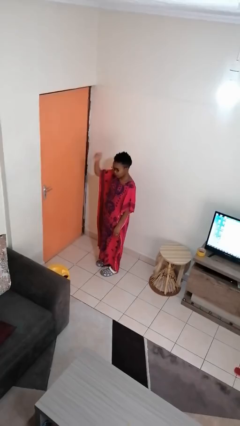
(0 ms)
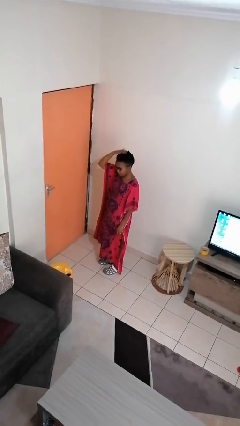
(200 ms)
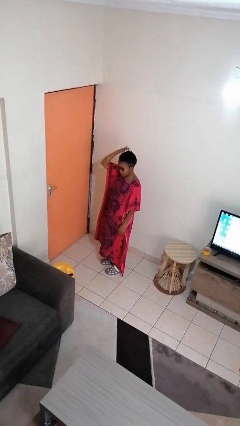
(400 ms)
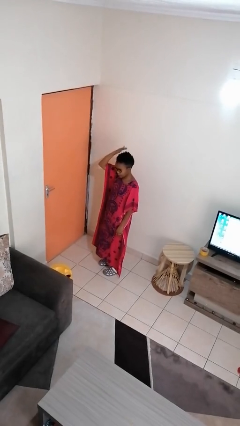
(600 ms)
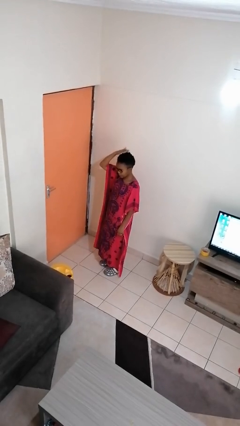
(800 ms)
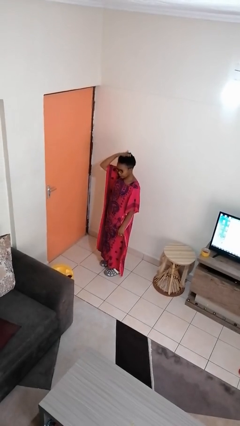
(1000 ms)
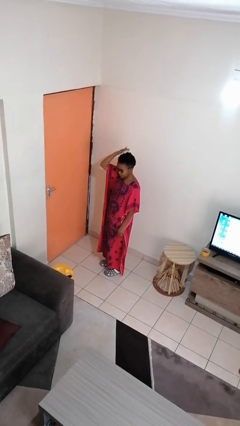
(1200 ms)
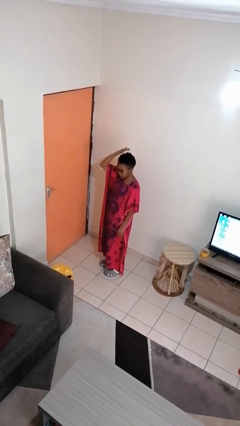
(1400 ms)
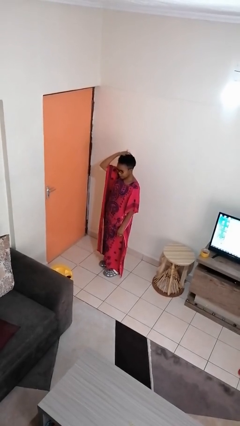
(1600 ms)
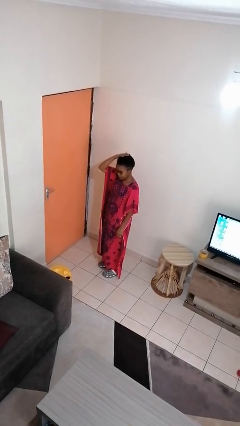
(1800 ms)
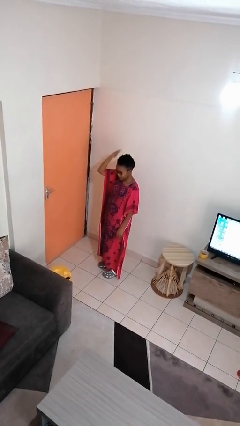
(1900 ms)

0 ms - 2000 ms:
person pats head

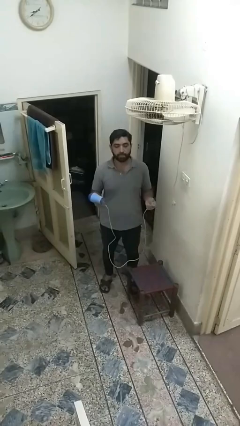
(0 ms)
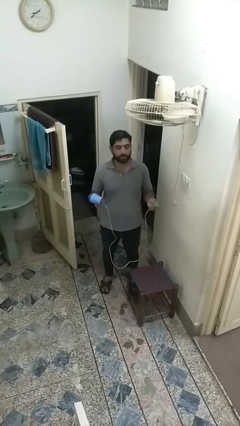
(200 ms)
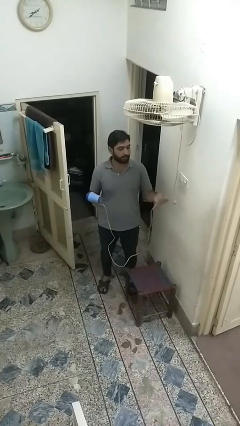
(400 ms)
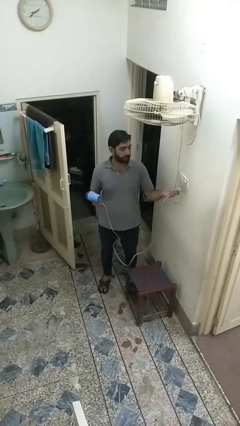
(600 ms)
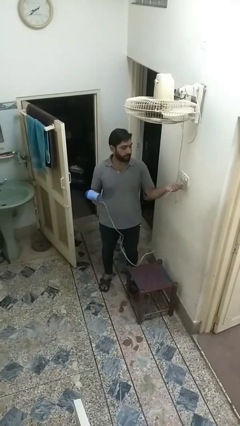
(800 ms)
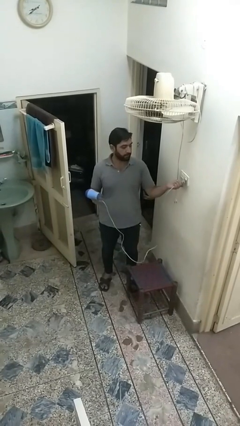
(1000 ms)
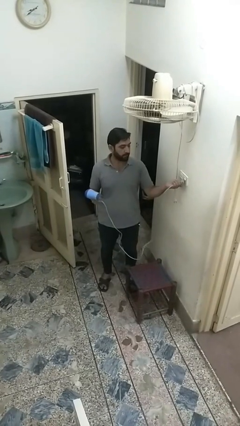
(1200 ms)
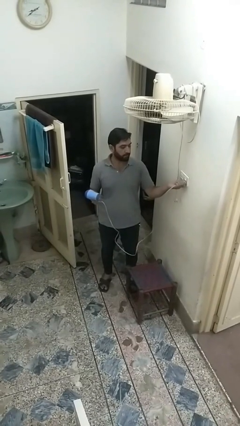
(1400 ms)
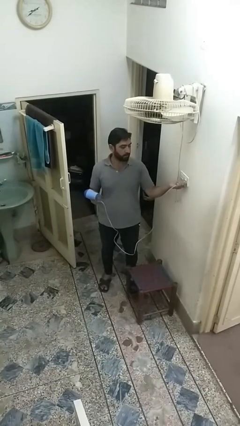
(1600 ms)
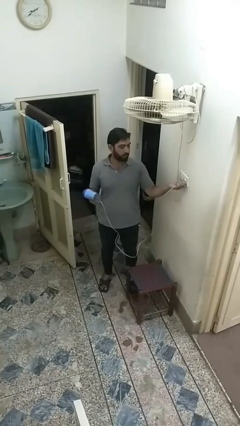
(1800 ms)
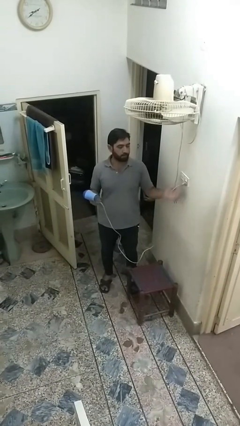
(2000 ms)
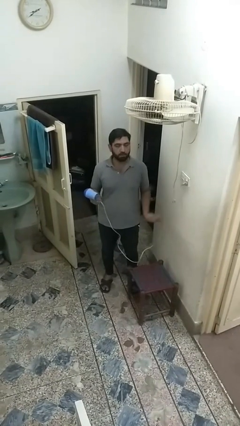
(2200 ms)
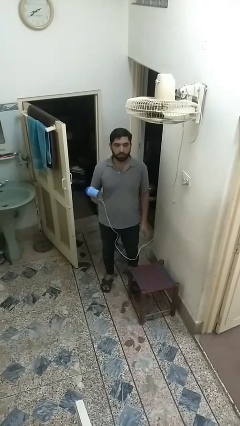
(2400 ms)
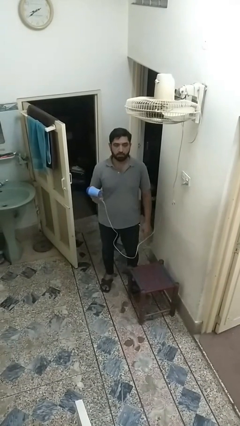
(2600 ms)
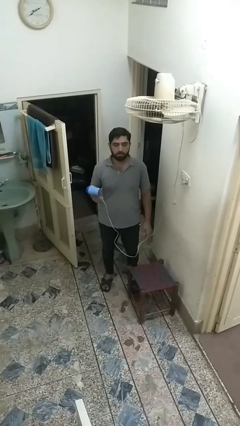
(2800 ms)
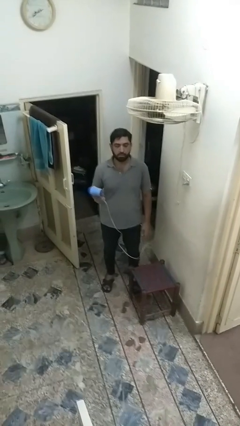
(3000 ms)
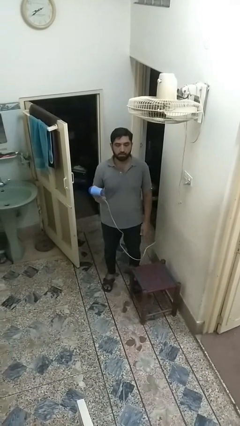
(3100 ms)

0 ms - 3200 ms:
person plugs into electrical socket

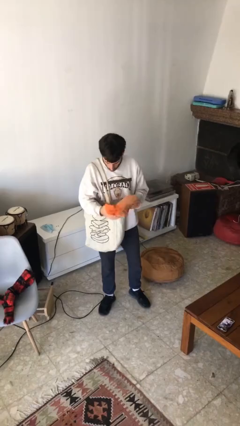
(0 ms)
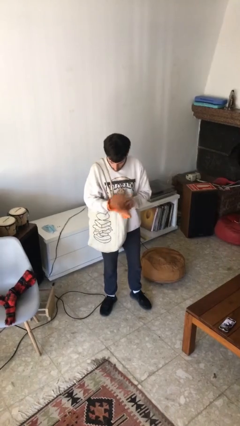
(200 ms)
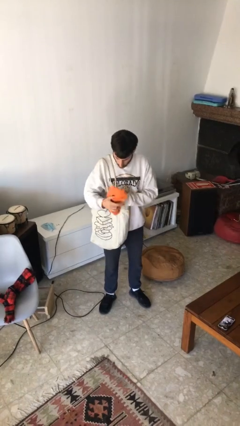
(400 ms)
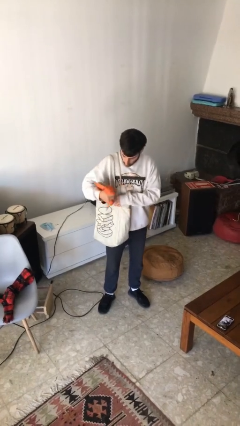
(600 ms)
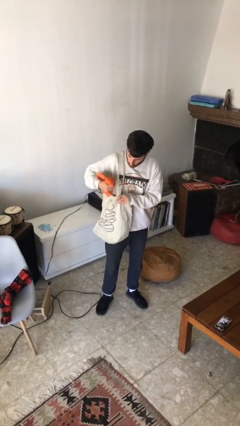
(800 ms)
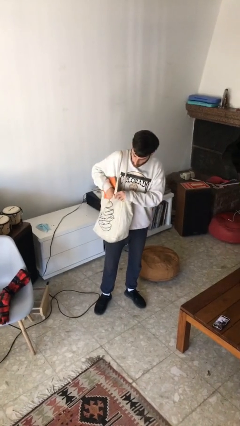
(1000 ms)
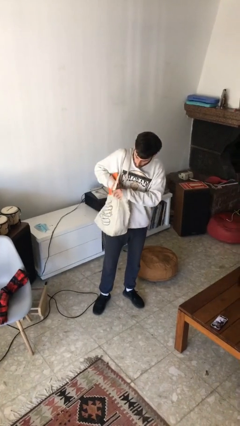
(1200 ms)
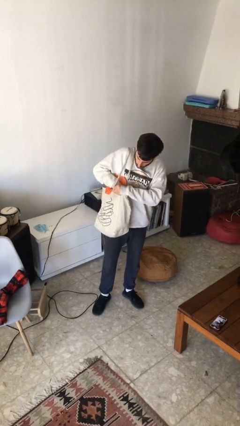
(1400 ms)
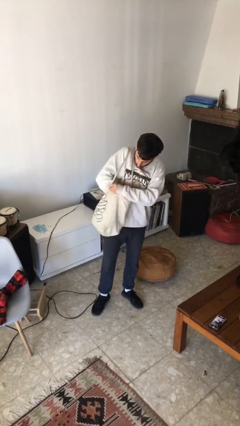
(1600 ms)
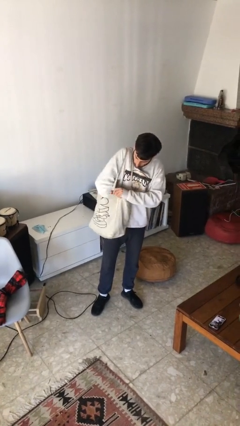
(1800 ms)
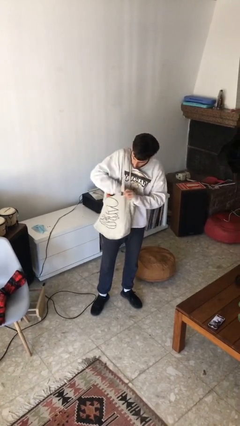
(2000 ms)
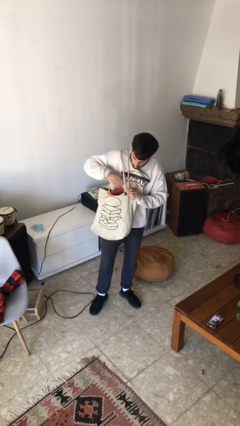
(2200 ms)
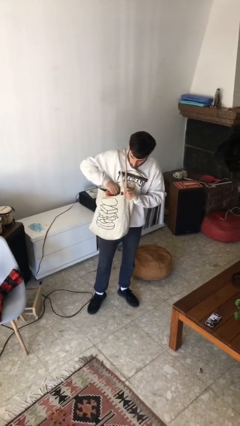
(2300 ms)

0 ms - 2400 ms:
person puts object into purse

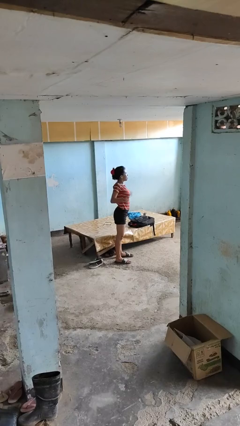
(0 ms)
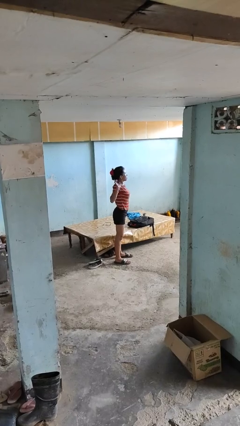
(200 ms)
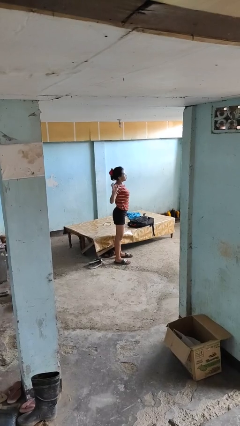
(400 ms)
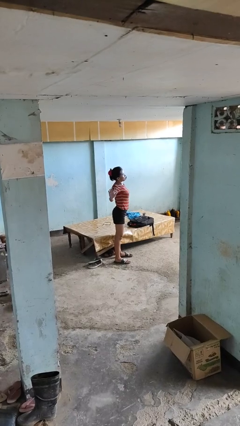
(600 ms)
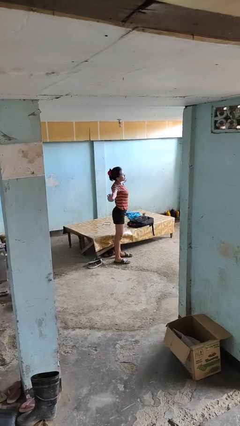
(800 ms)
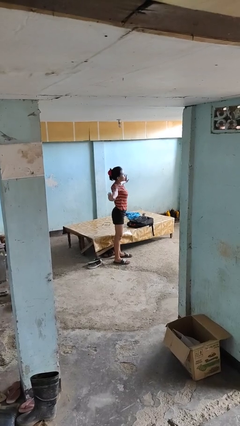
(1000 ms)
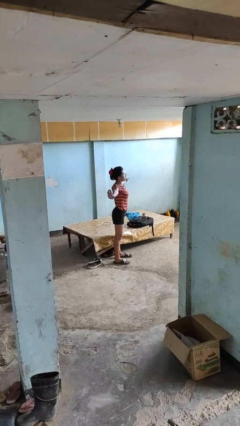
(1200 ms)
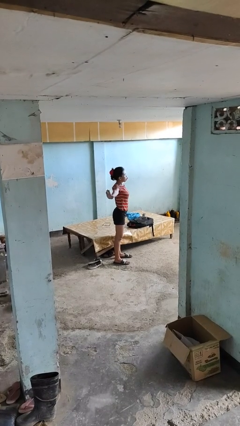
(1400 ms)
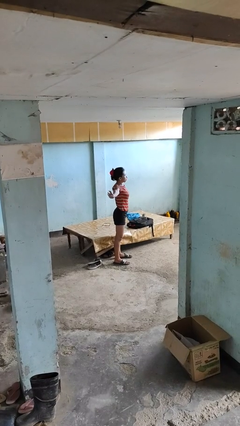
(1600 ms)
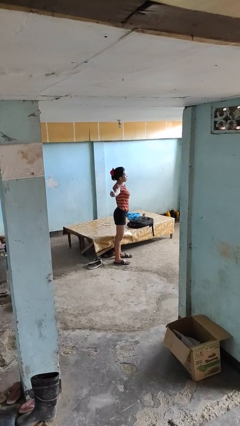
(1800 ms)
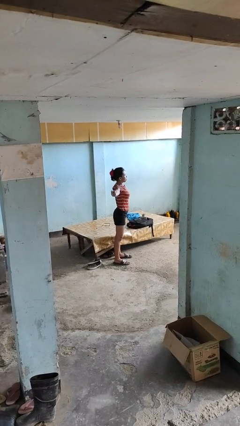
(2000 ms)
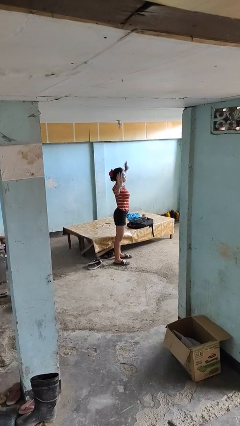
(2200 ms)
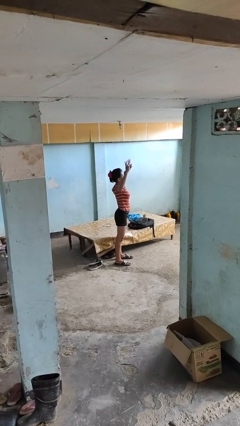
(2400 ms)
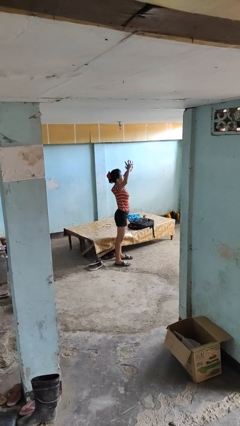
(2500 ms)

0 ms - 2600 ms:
person stretches arms to side

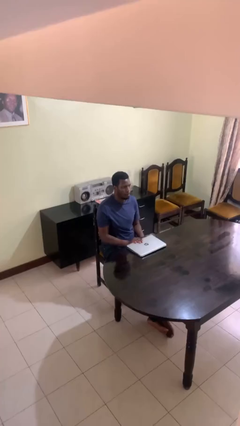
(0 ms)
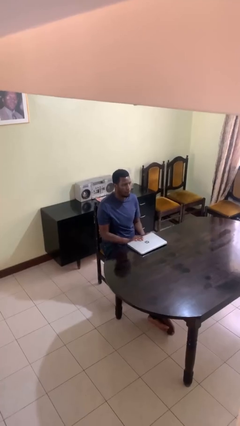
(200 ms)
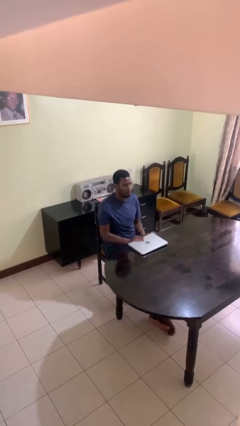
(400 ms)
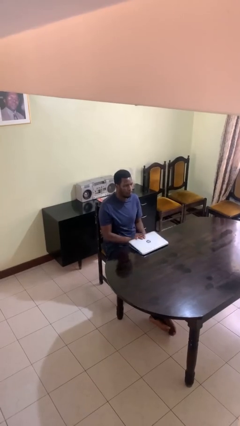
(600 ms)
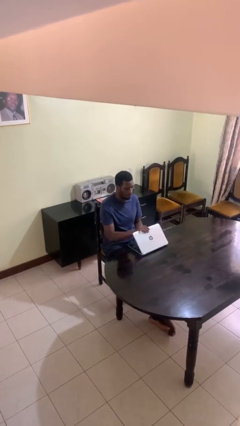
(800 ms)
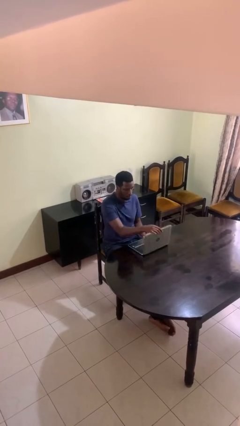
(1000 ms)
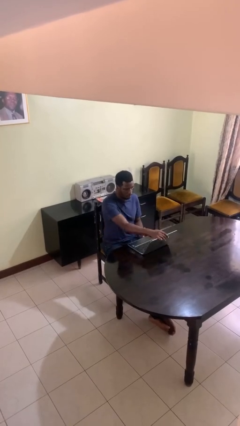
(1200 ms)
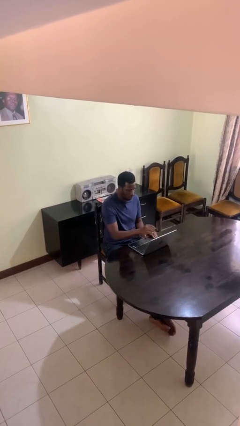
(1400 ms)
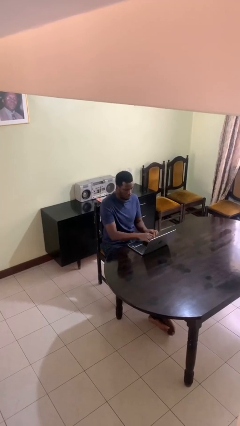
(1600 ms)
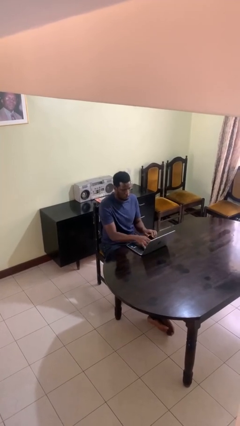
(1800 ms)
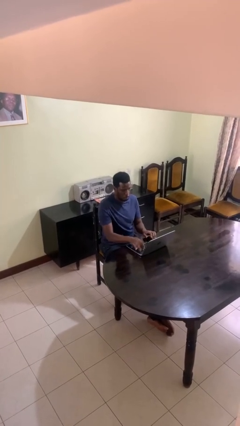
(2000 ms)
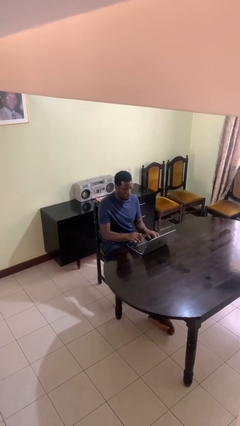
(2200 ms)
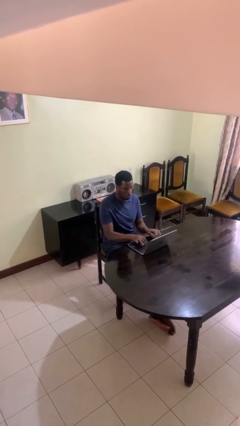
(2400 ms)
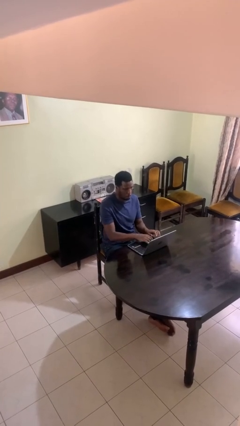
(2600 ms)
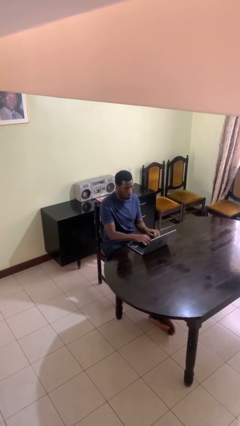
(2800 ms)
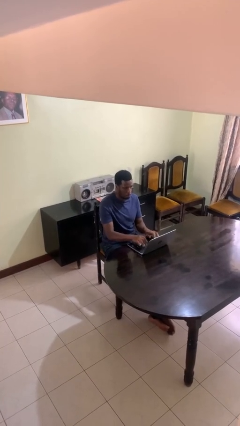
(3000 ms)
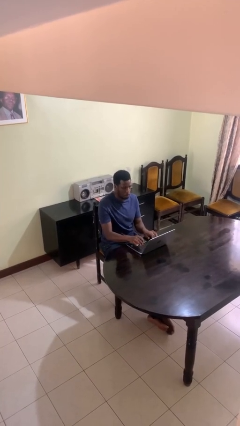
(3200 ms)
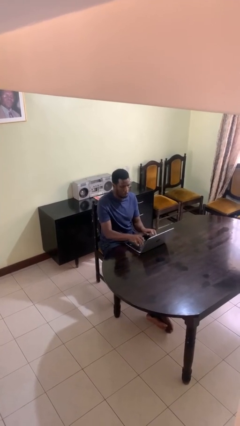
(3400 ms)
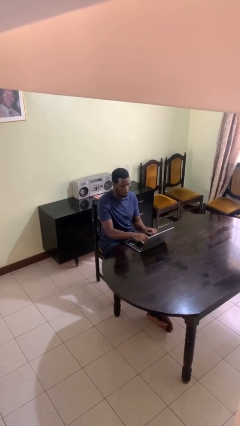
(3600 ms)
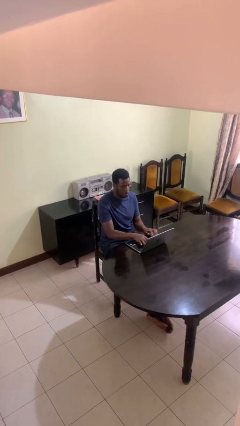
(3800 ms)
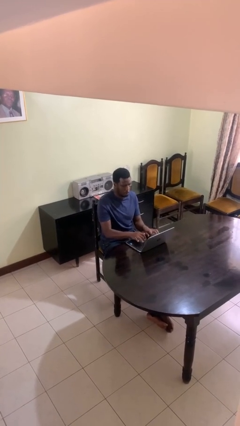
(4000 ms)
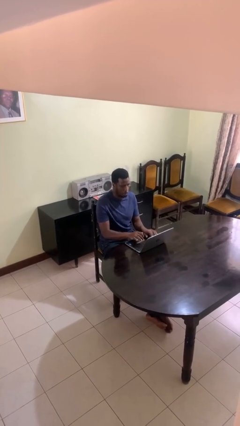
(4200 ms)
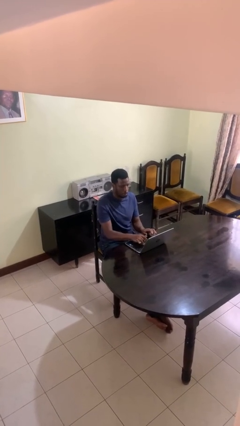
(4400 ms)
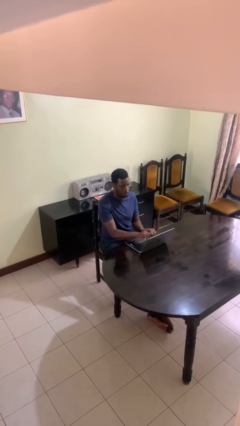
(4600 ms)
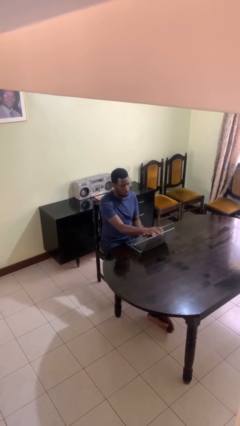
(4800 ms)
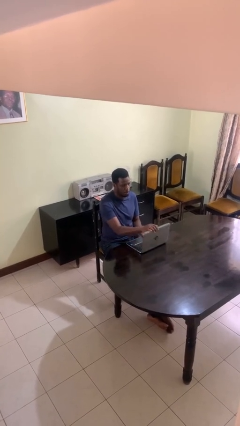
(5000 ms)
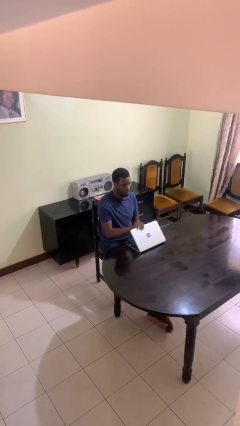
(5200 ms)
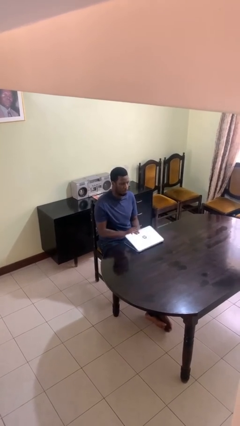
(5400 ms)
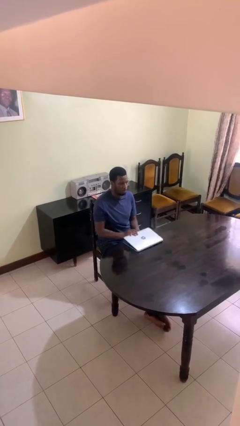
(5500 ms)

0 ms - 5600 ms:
person interacts with laptop

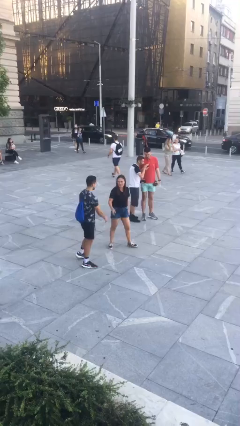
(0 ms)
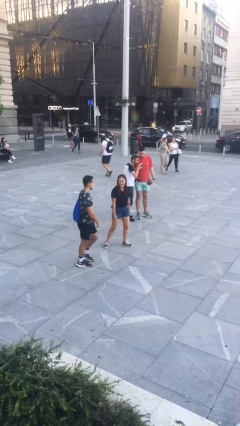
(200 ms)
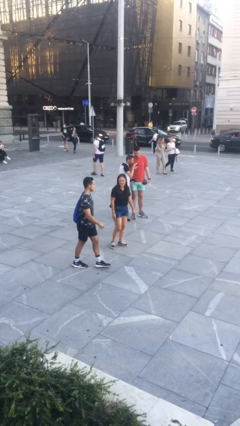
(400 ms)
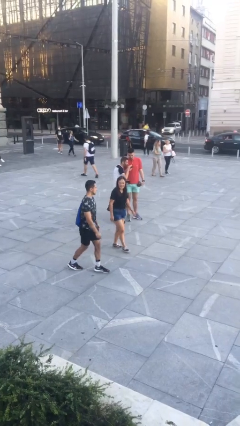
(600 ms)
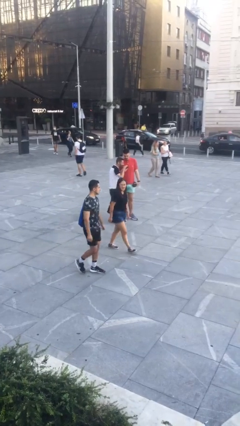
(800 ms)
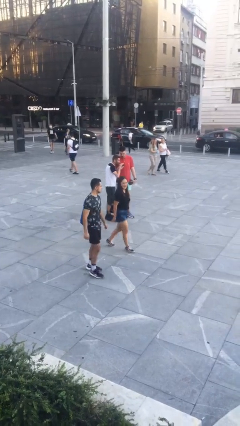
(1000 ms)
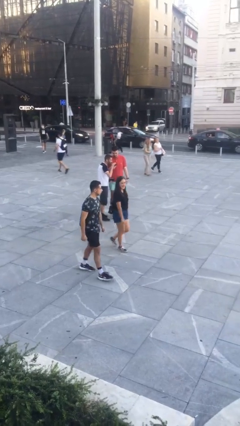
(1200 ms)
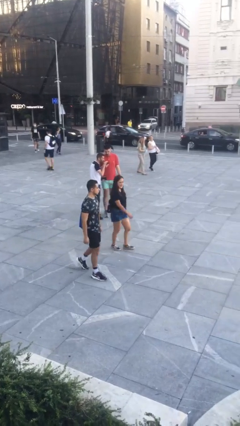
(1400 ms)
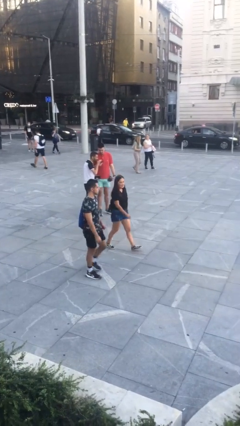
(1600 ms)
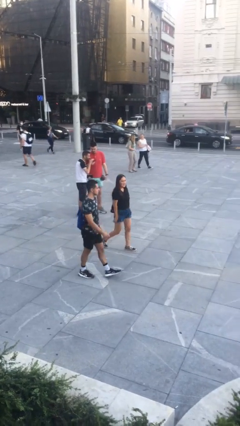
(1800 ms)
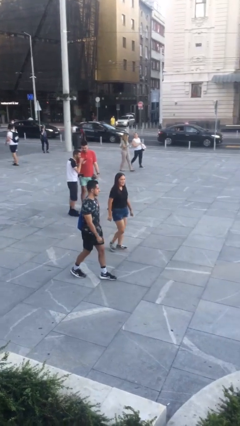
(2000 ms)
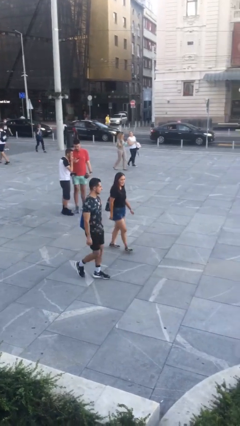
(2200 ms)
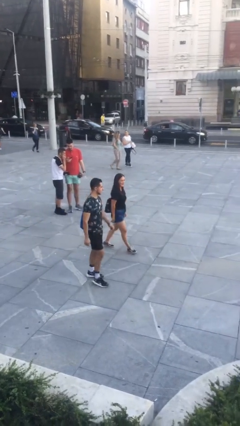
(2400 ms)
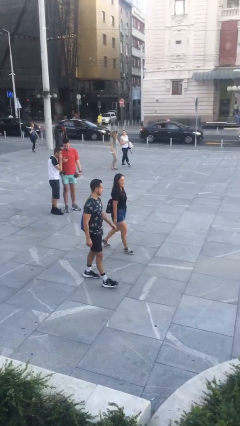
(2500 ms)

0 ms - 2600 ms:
person talks to person
